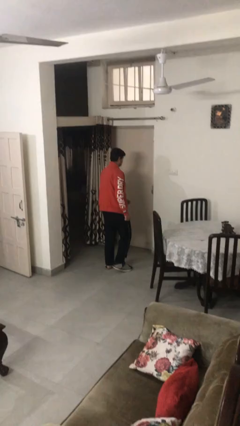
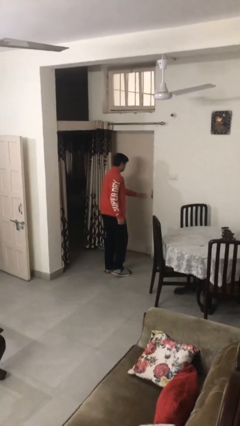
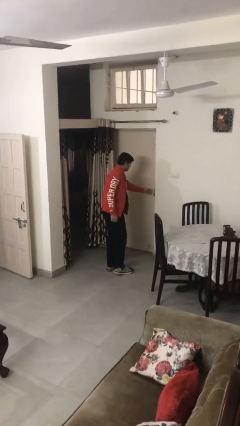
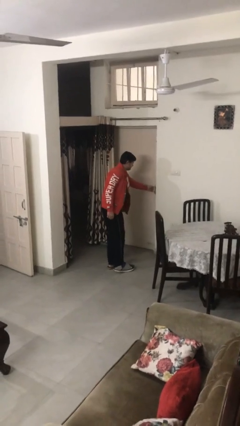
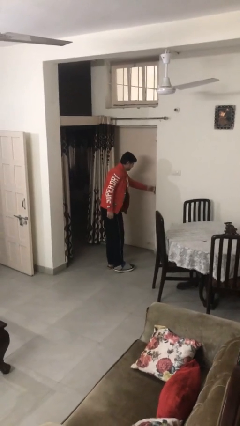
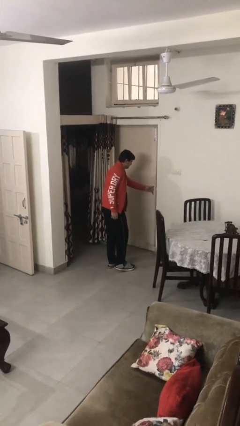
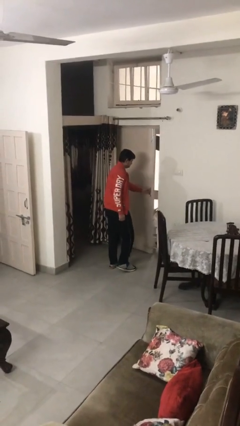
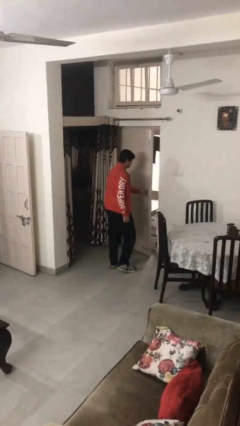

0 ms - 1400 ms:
person opens facility door

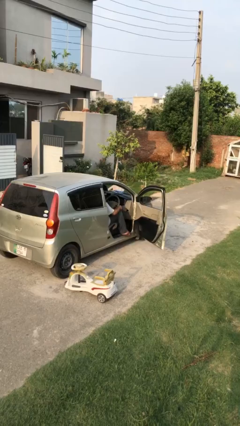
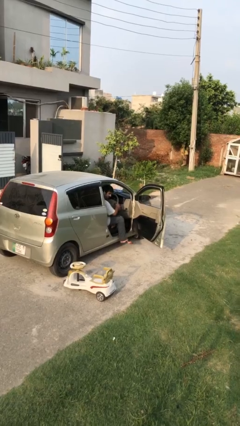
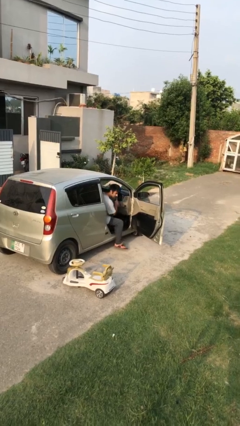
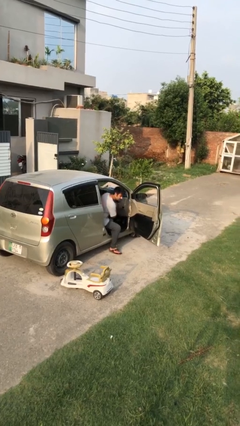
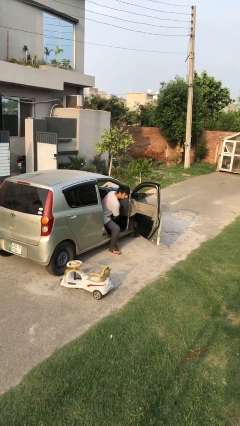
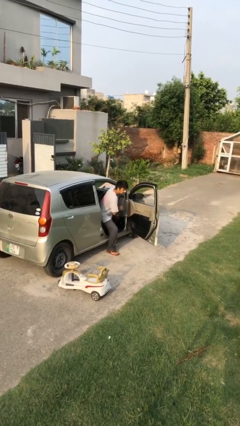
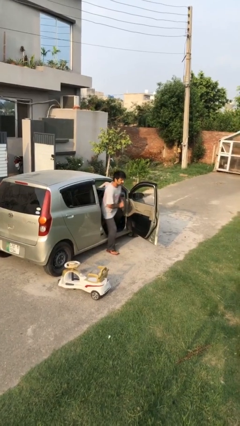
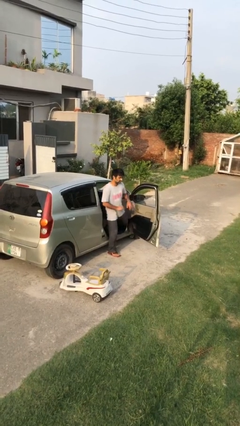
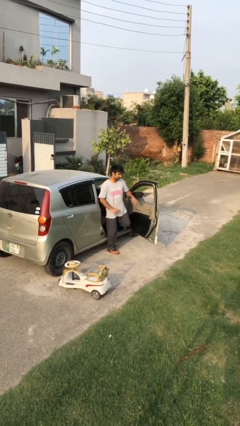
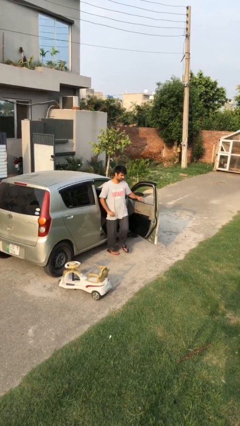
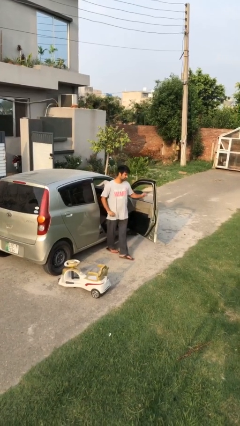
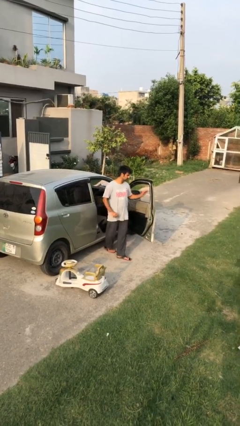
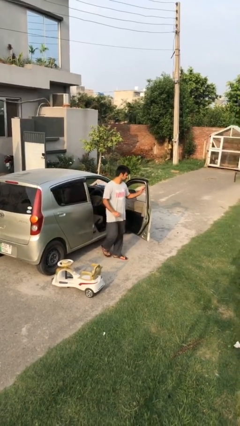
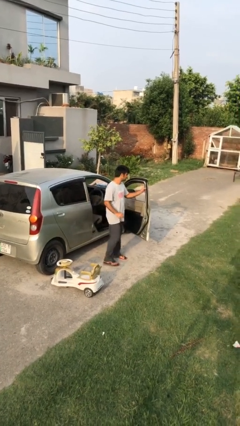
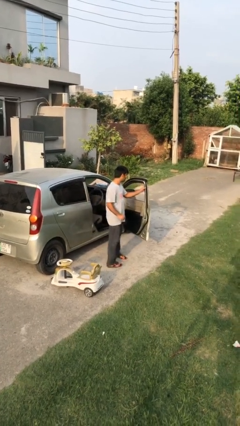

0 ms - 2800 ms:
person exits car

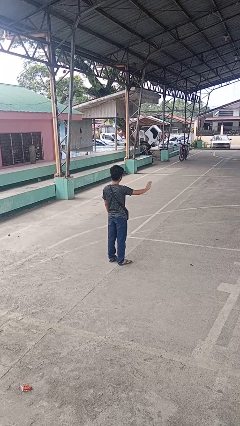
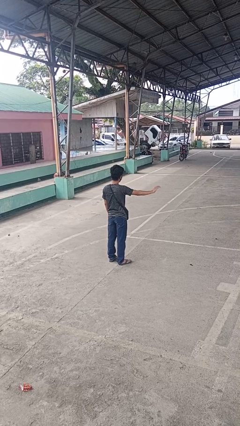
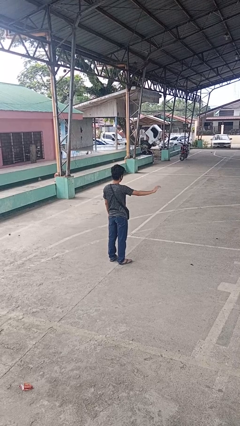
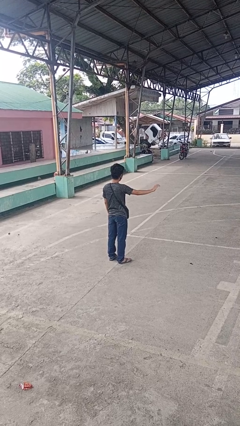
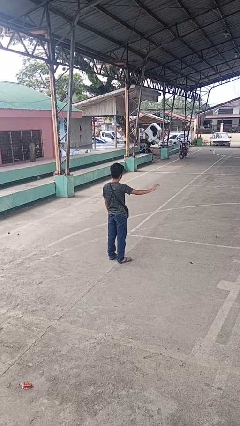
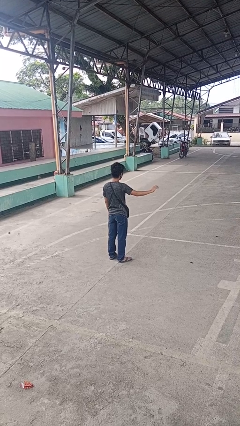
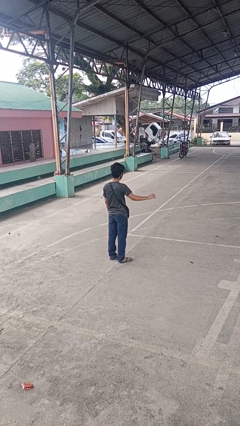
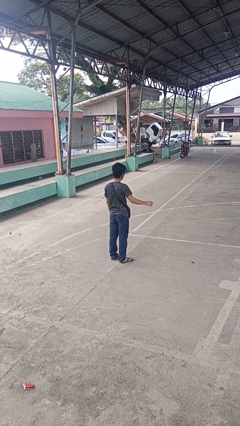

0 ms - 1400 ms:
person gestures swipe right

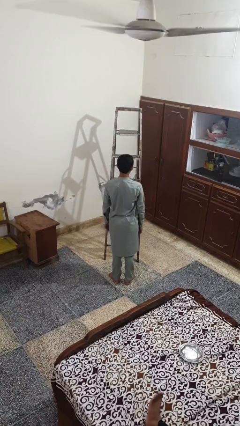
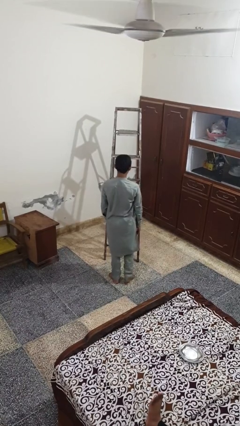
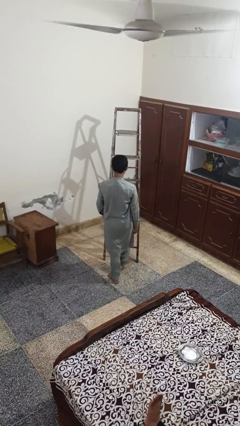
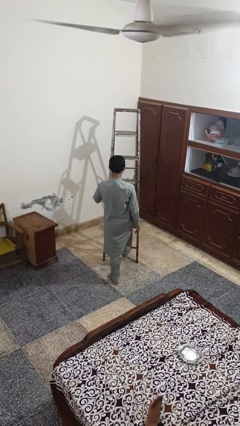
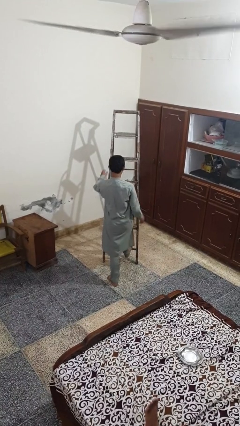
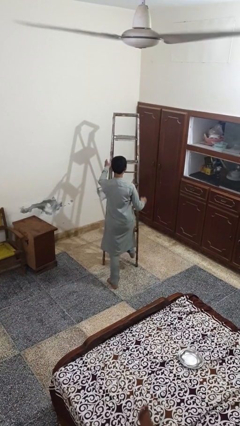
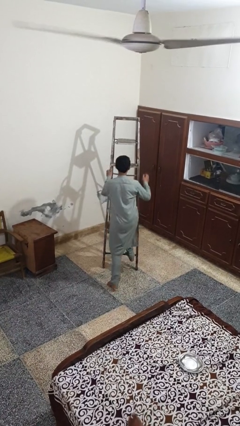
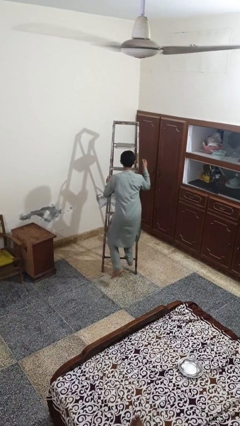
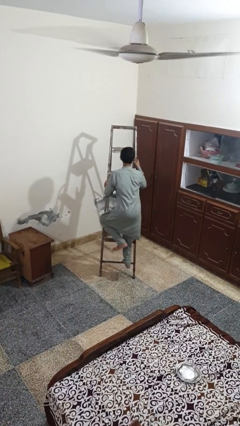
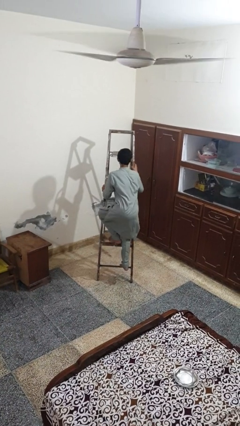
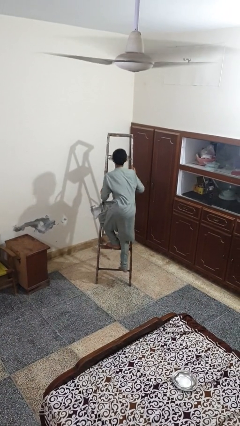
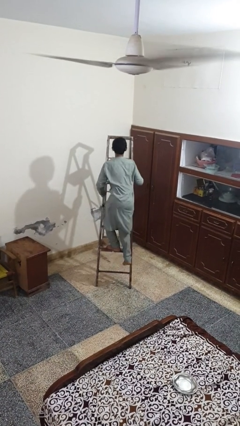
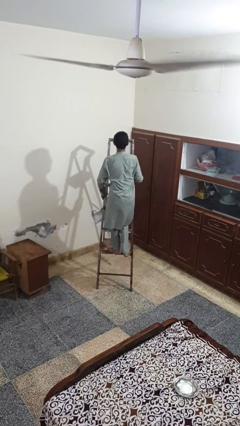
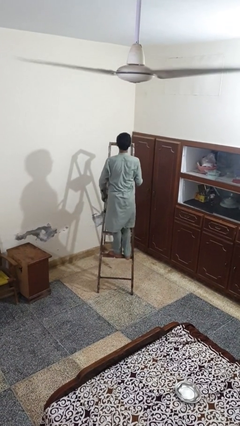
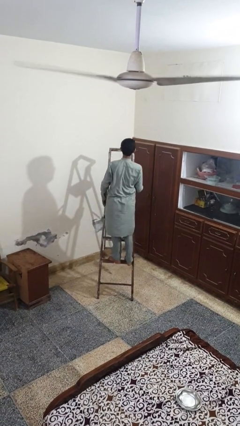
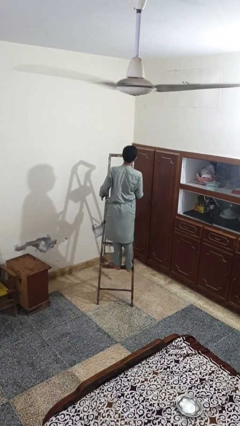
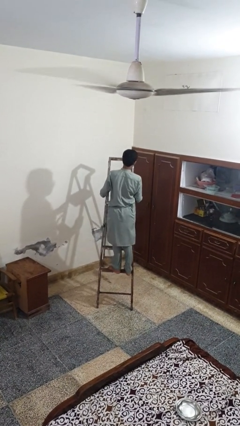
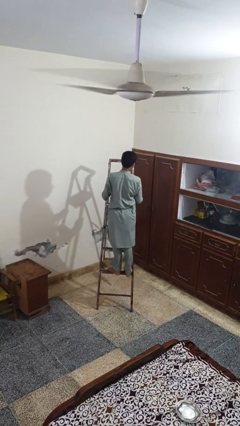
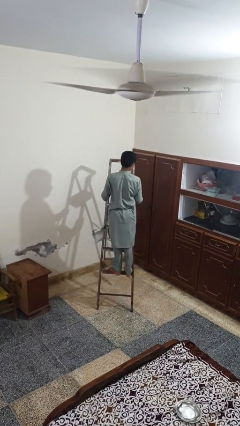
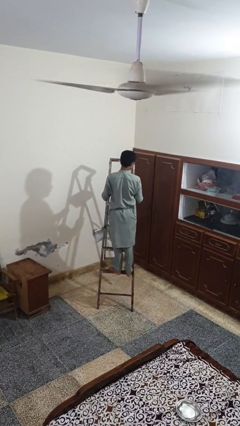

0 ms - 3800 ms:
person climbs up ladder

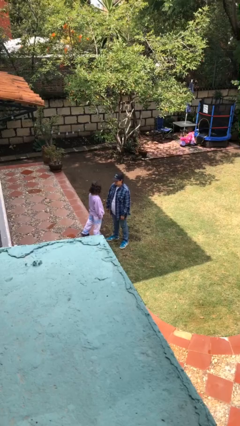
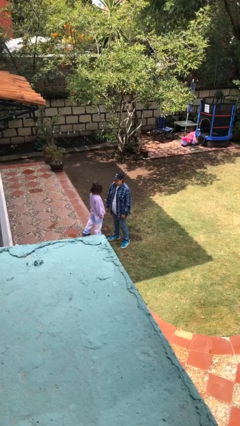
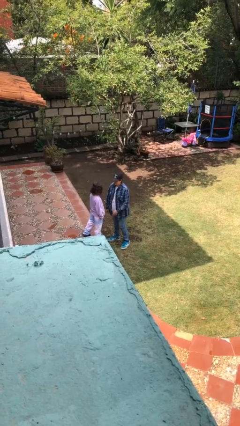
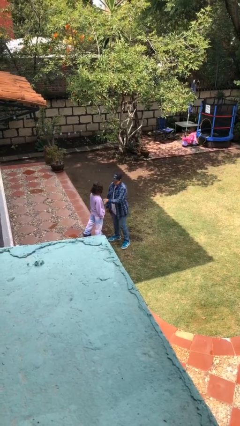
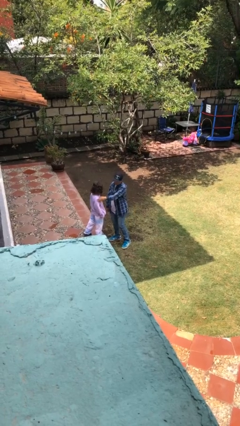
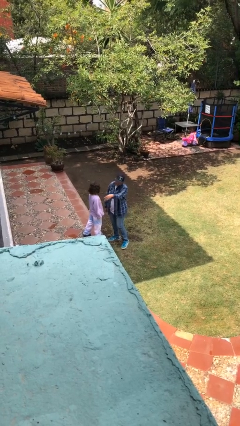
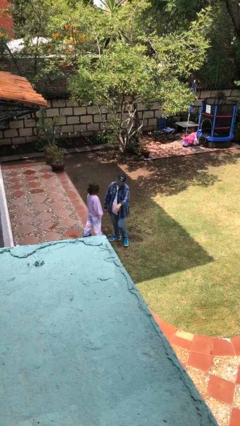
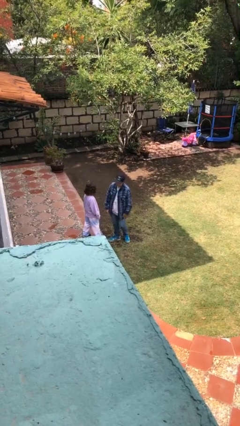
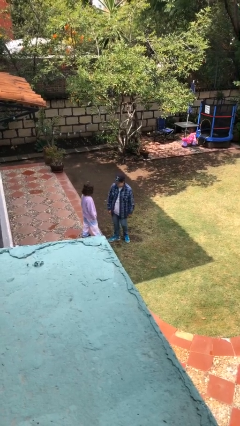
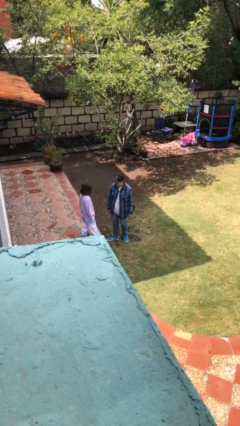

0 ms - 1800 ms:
person shoves person

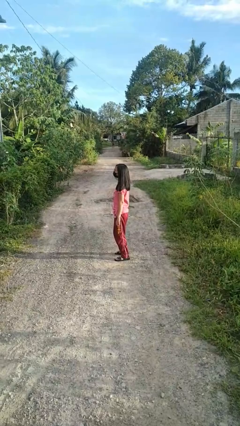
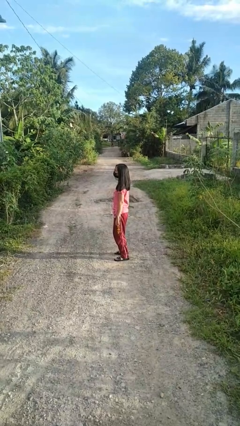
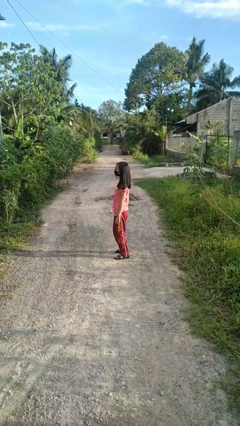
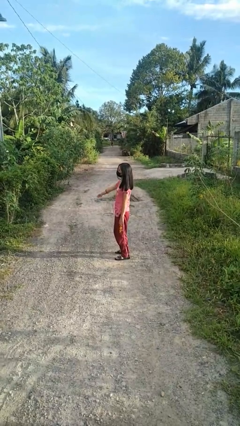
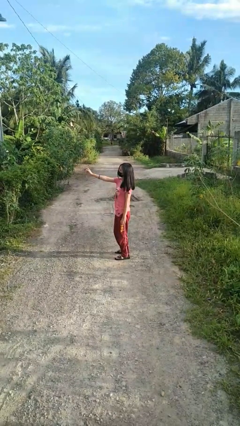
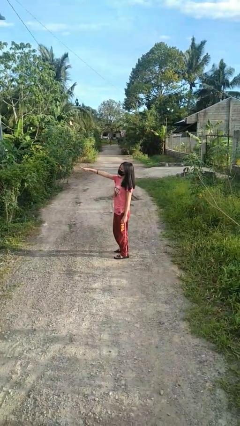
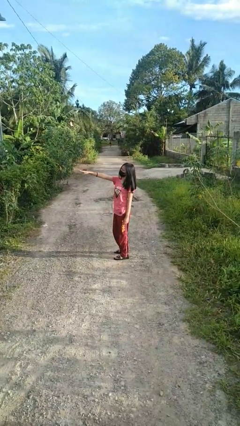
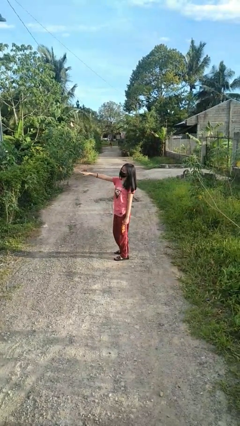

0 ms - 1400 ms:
person points at person

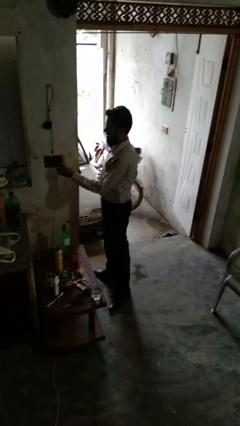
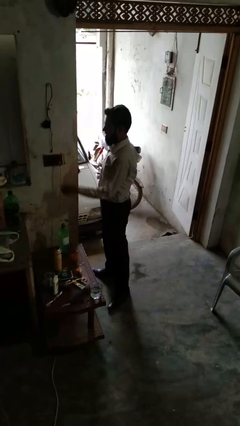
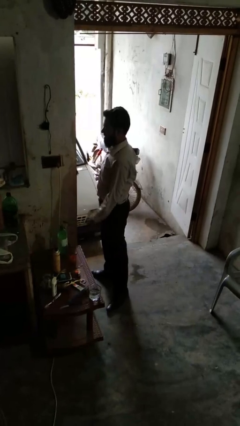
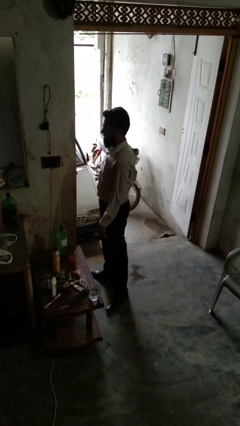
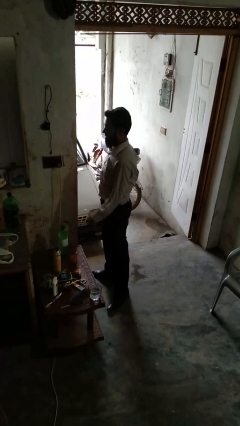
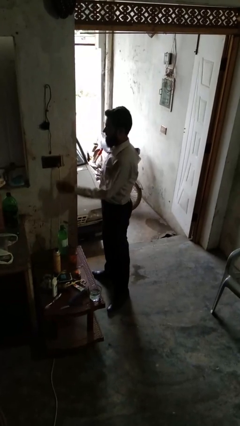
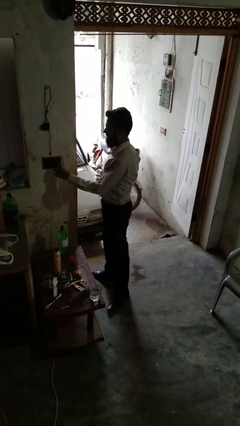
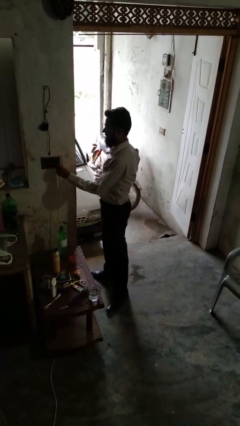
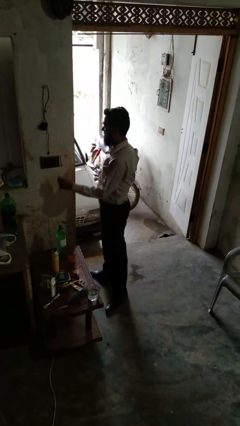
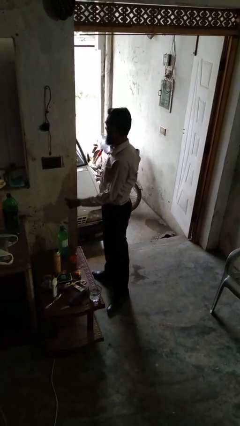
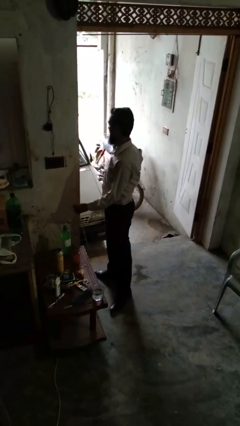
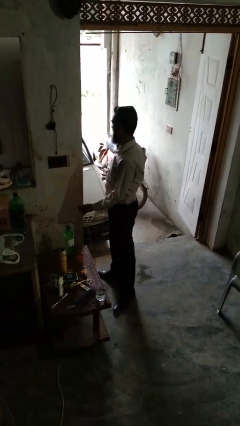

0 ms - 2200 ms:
person unplugs from electrical socket

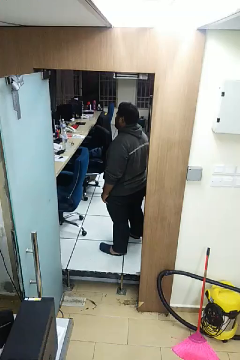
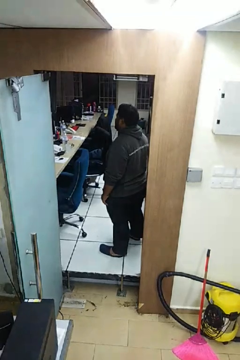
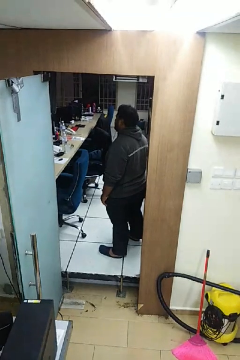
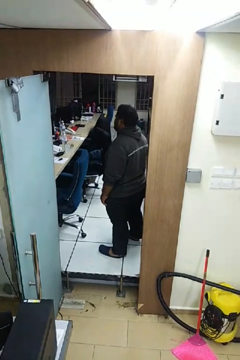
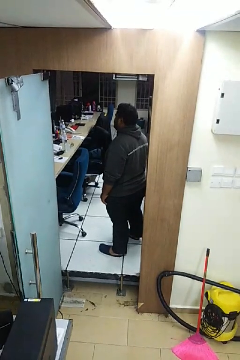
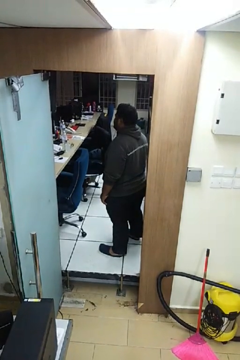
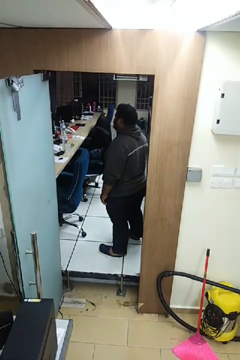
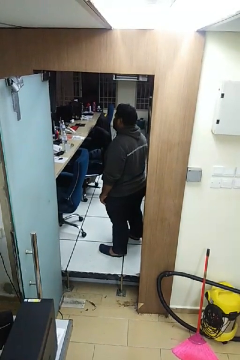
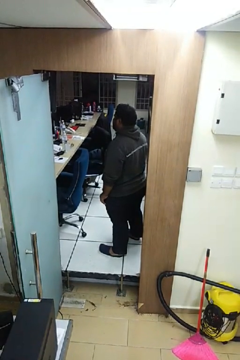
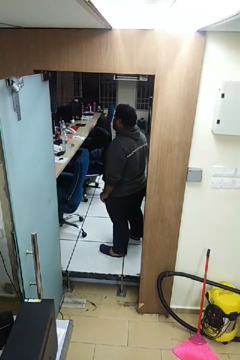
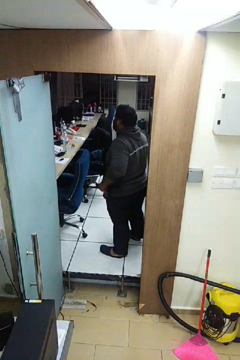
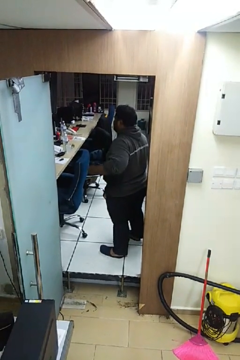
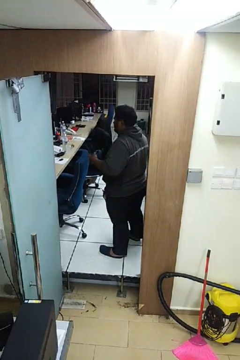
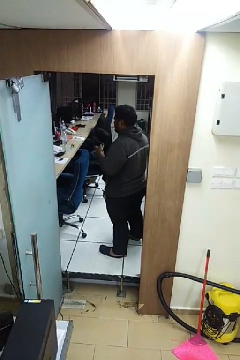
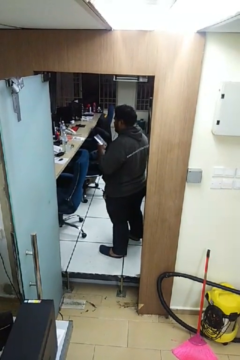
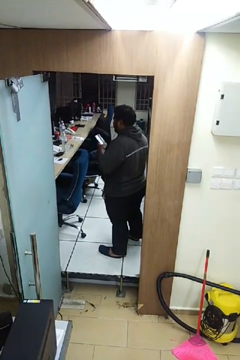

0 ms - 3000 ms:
person takes phone from pocket
